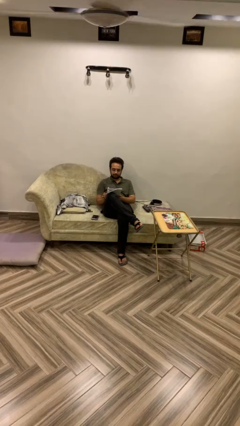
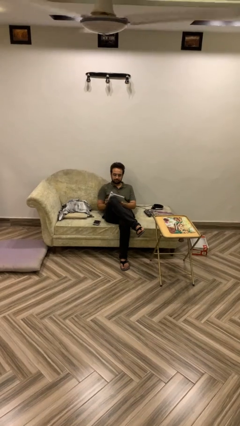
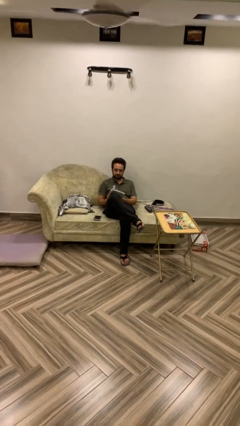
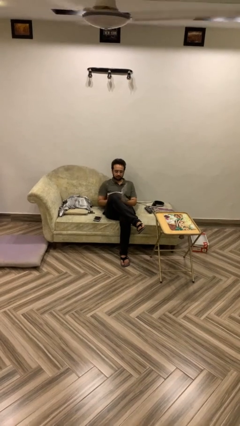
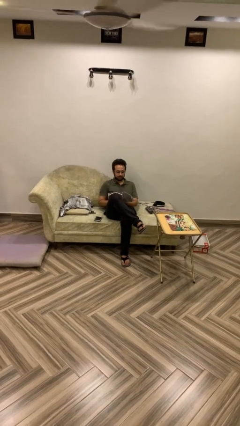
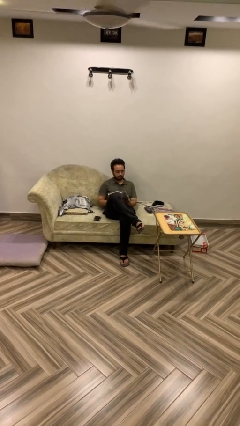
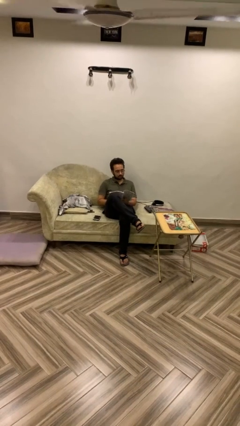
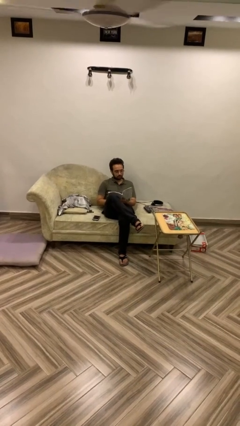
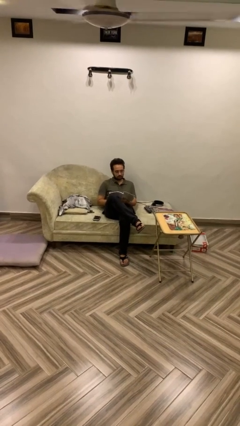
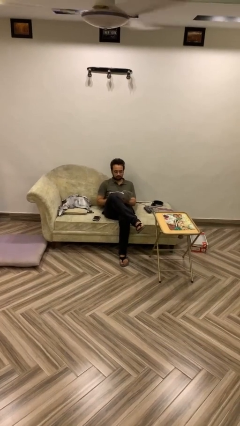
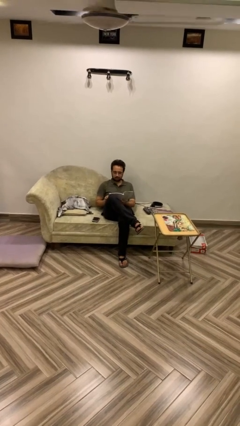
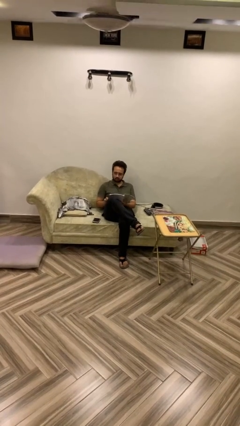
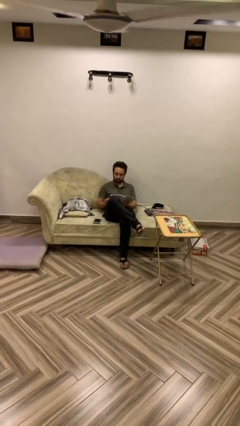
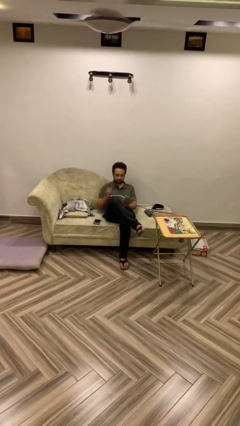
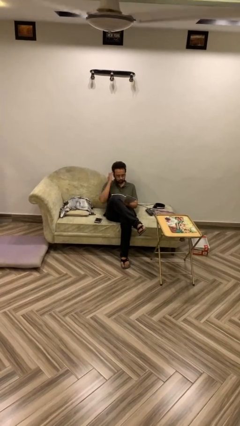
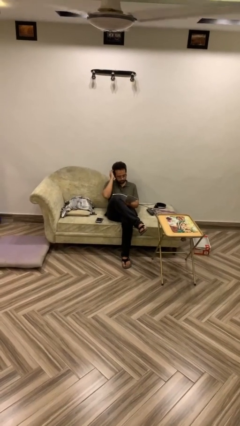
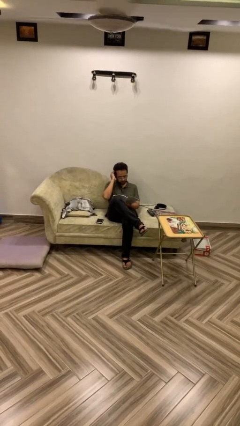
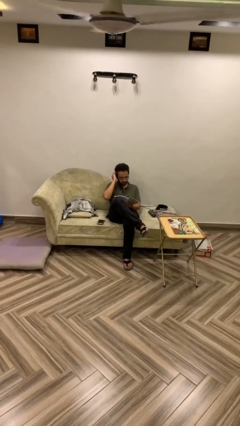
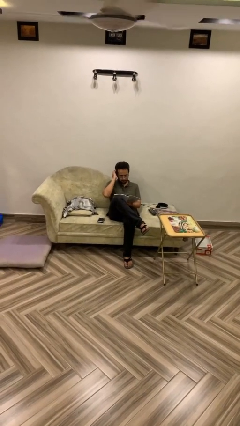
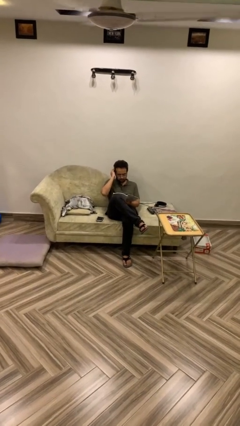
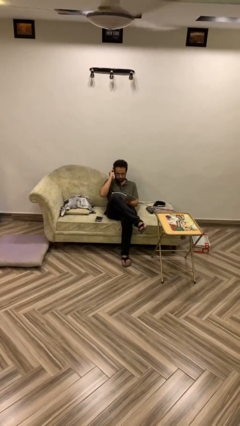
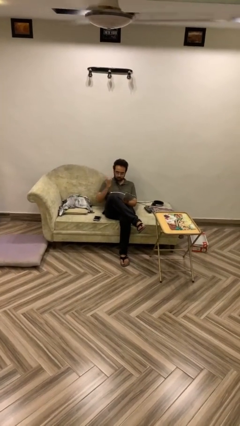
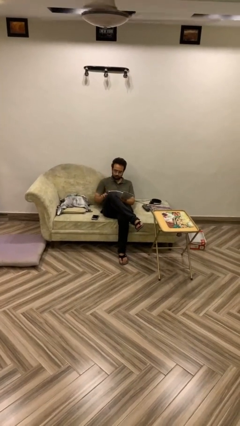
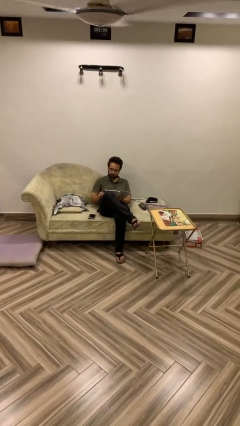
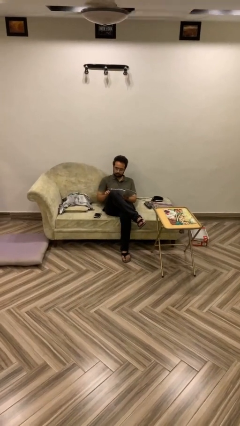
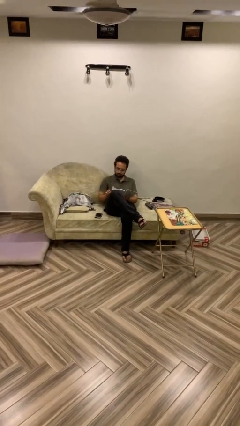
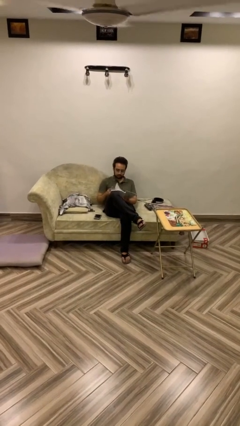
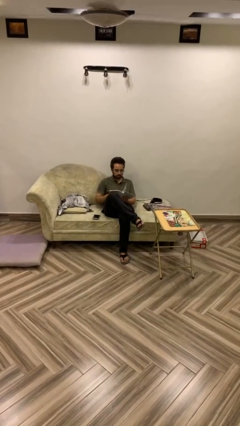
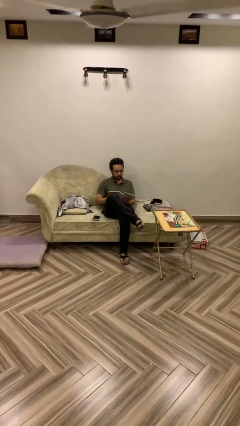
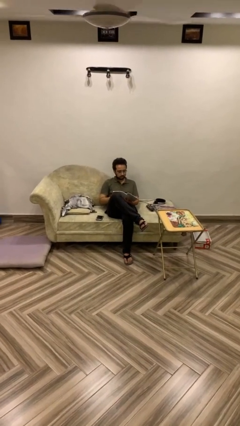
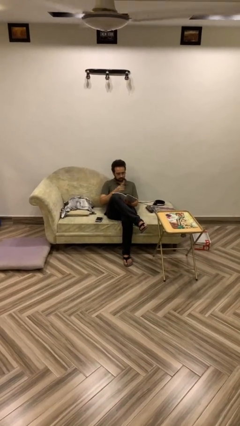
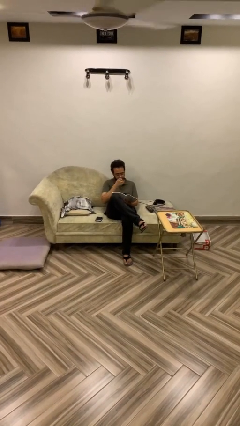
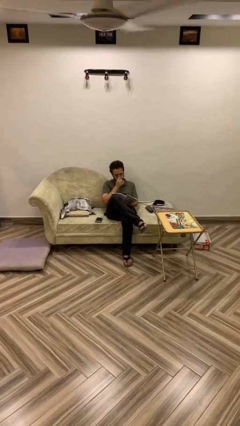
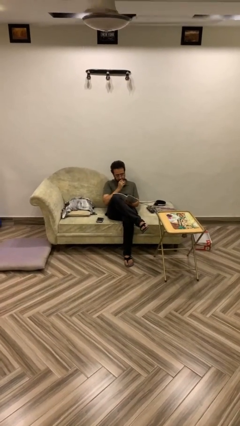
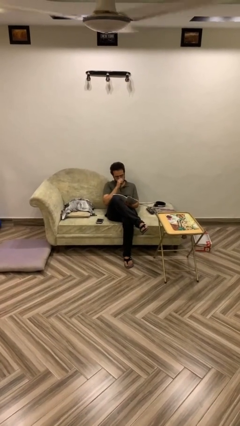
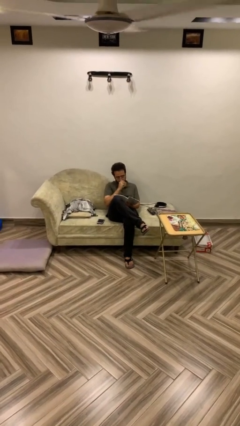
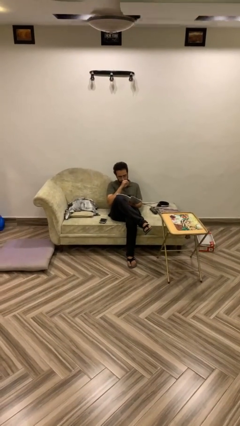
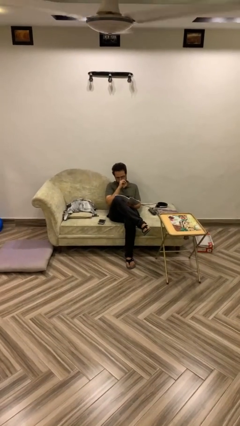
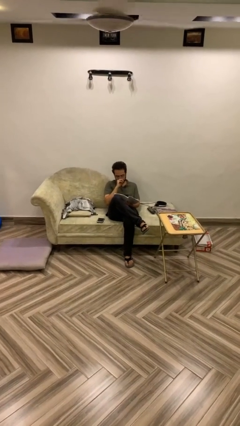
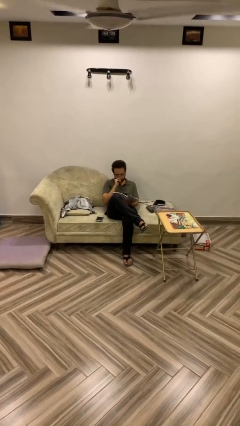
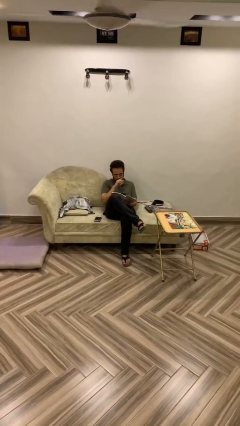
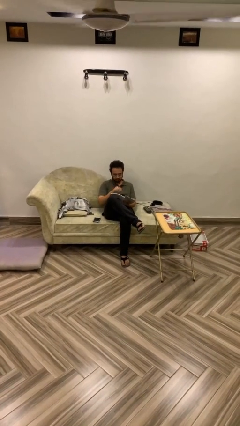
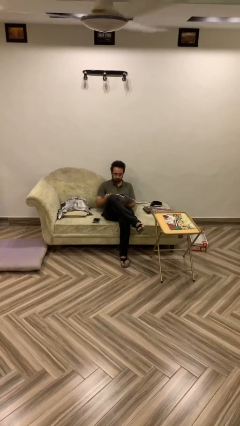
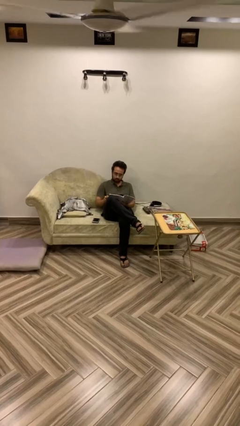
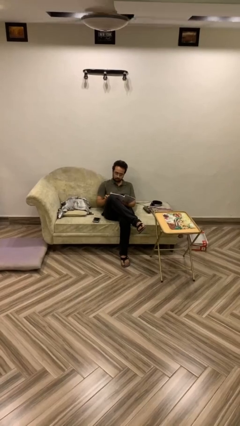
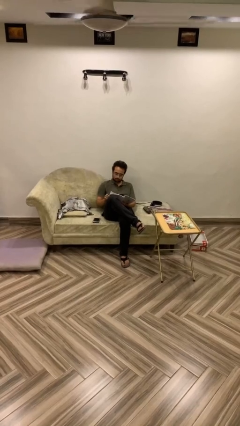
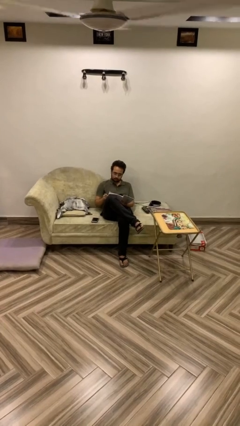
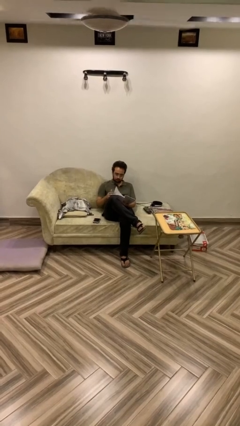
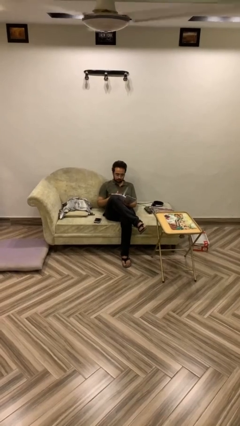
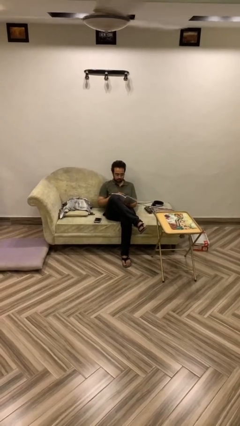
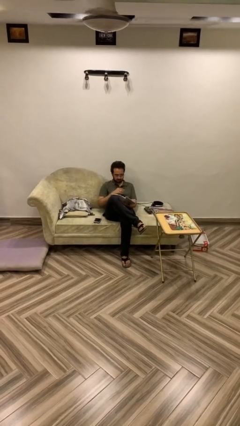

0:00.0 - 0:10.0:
person reads document

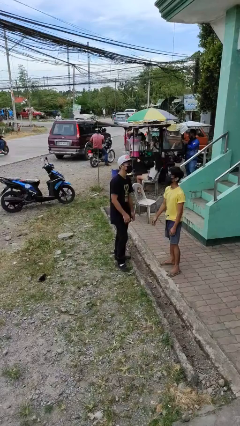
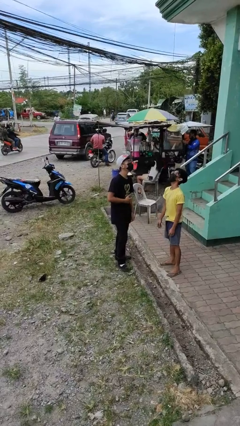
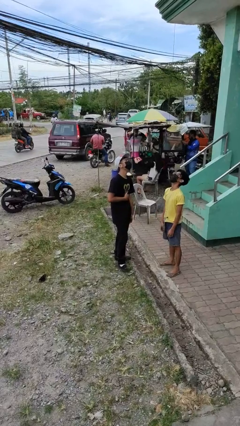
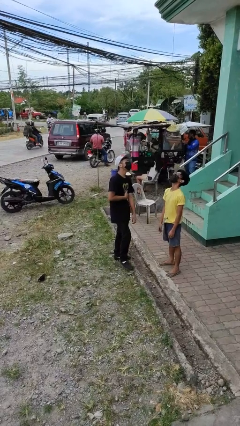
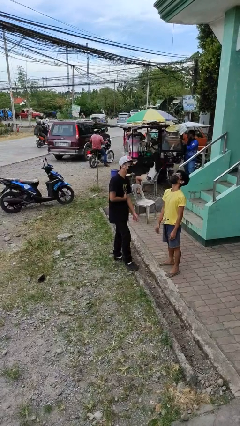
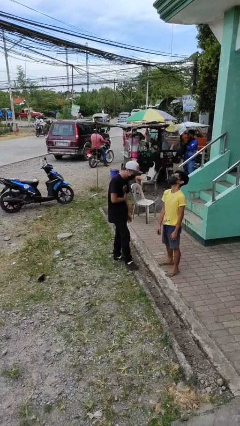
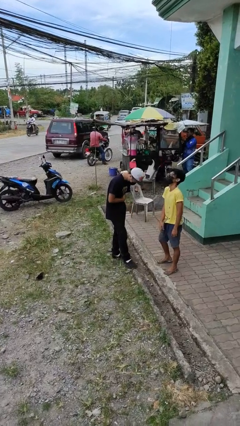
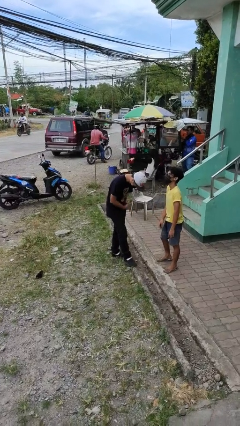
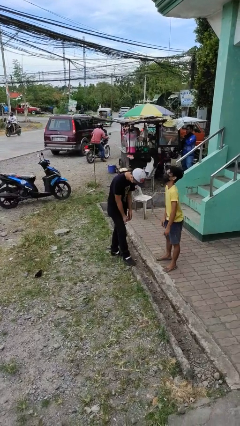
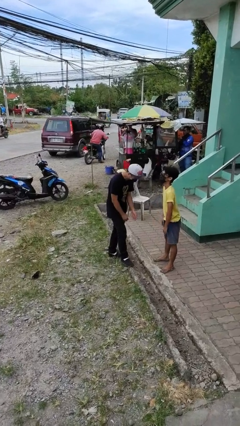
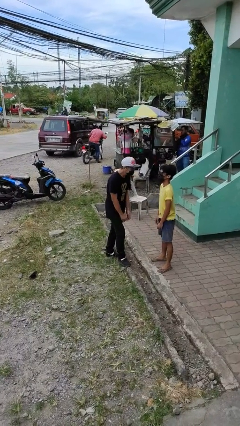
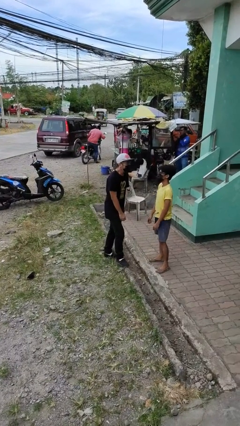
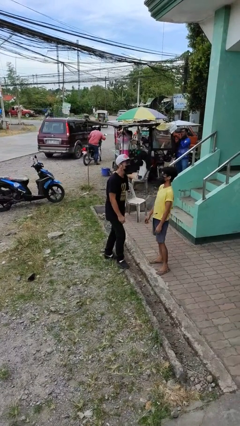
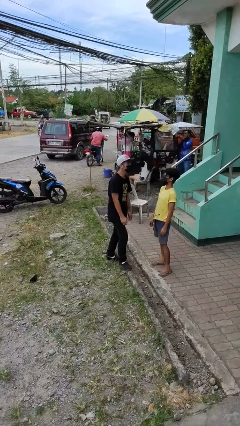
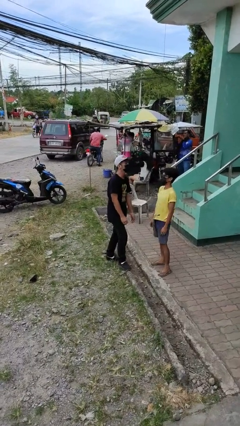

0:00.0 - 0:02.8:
person laughs with person

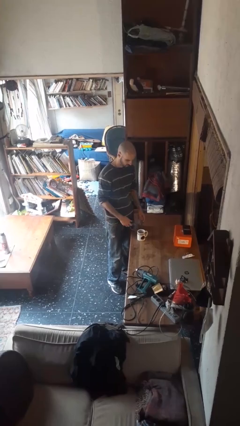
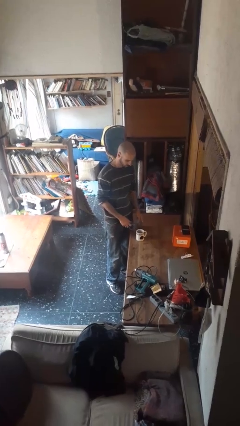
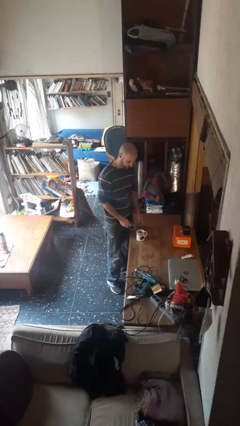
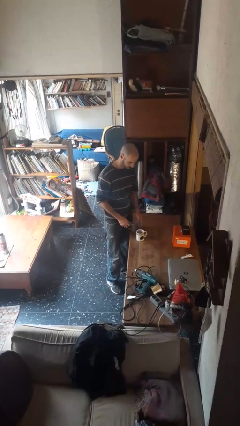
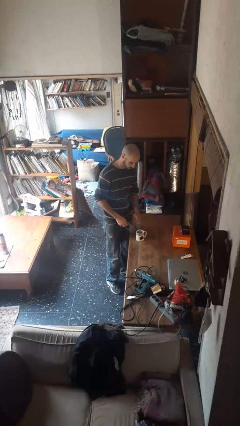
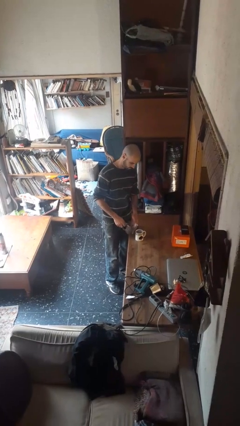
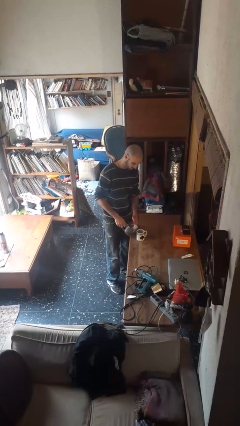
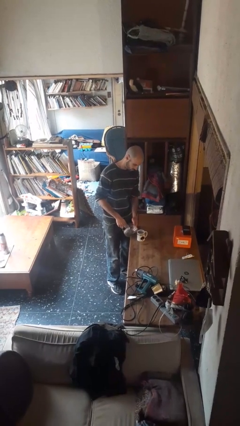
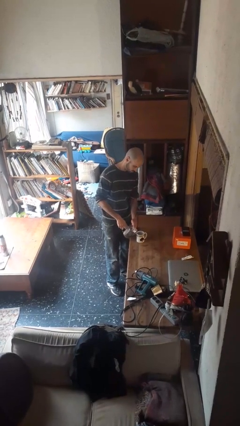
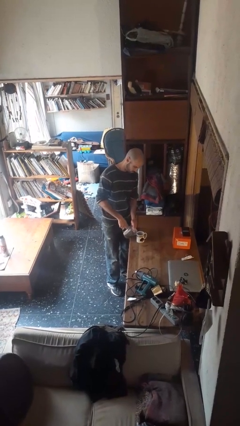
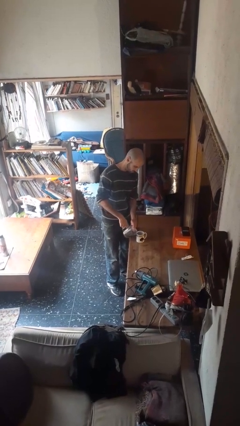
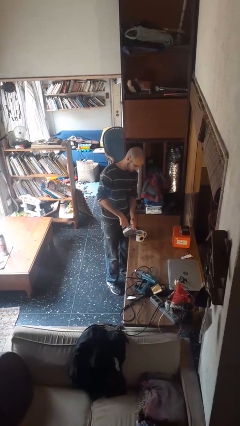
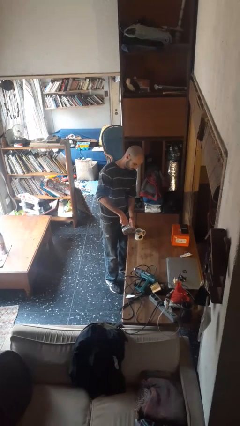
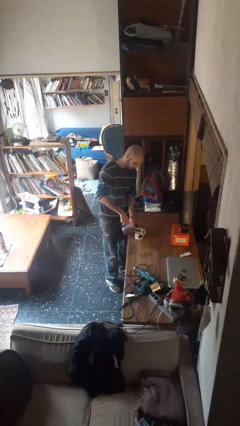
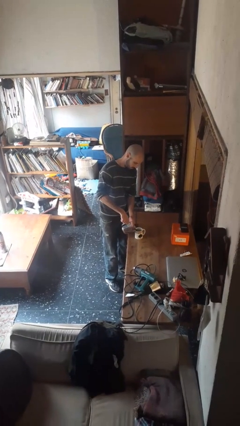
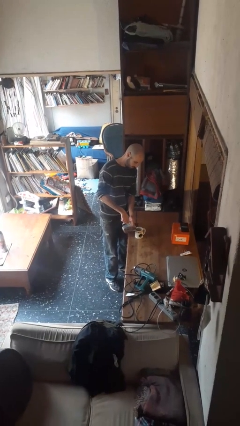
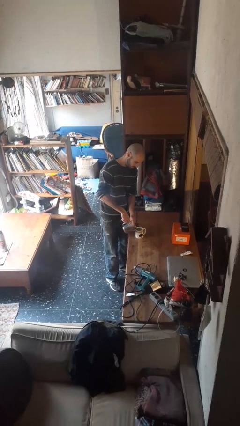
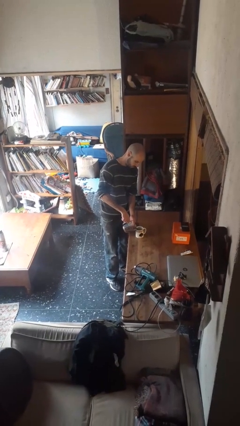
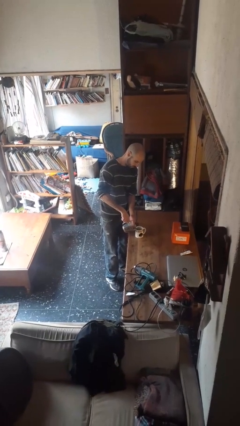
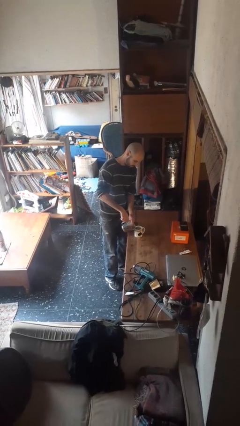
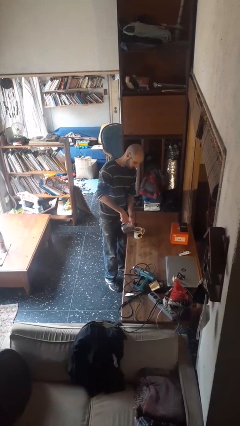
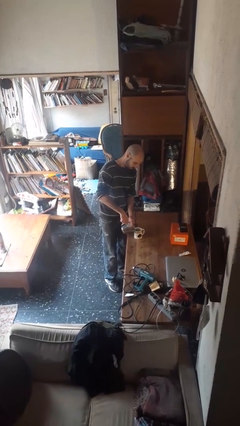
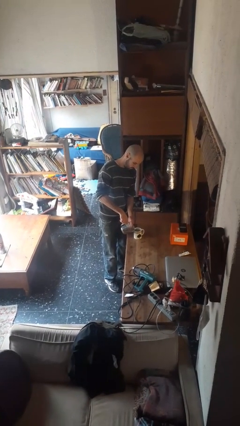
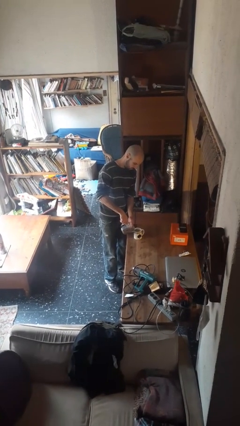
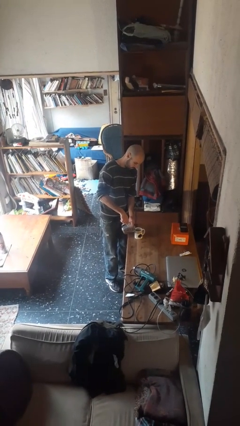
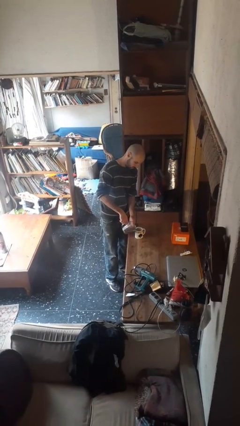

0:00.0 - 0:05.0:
person pours coffee into mug

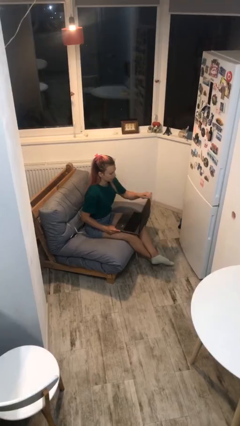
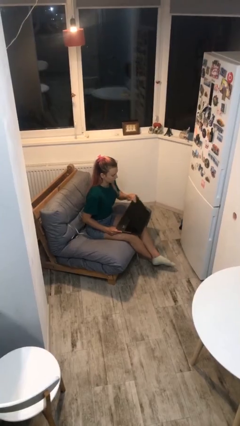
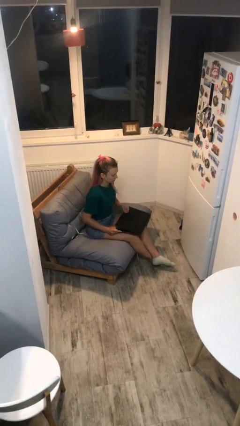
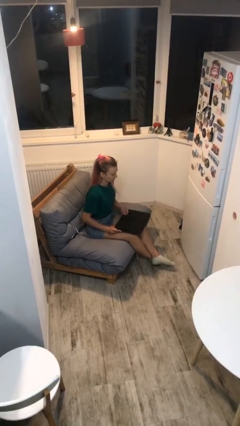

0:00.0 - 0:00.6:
person closes laptop
